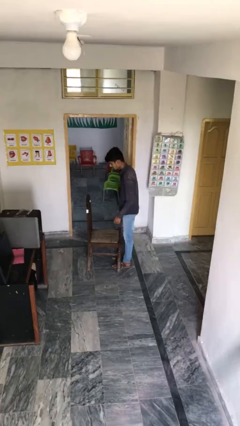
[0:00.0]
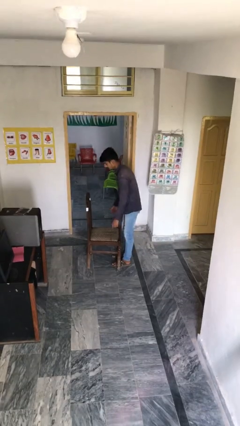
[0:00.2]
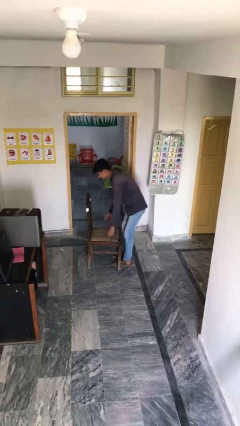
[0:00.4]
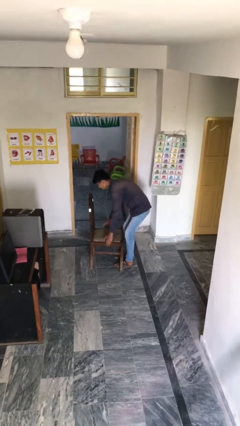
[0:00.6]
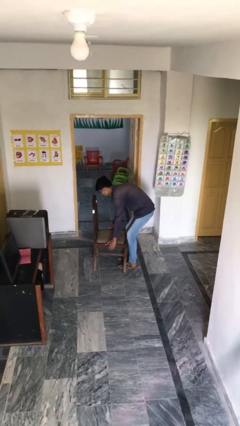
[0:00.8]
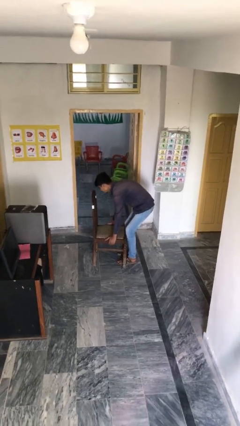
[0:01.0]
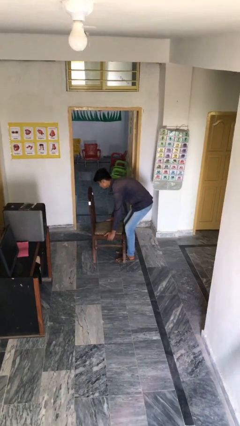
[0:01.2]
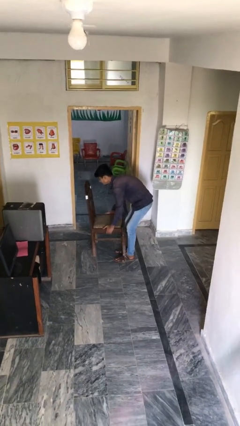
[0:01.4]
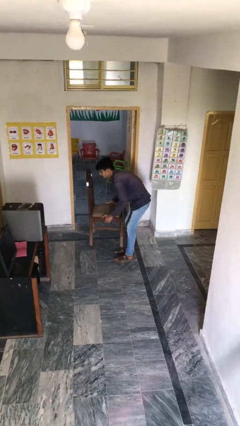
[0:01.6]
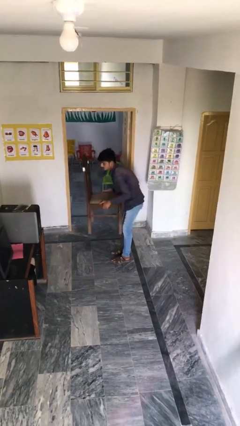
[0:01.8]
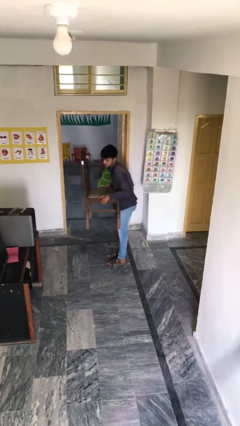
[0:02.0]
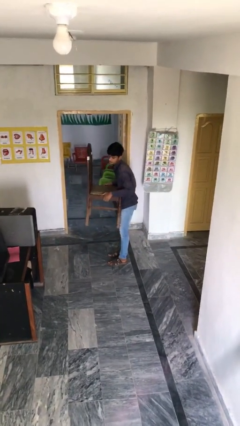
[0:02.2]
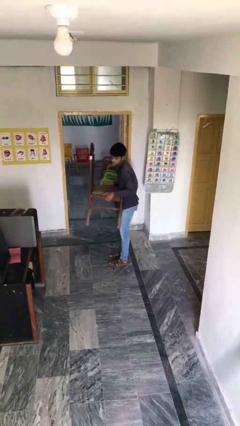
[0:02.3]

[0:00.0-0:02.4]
person picks up object from floor

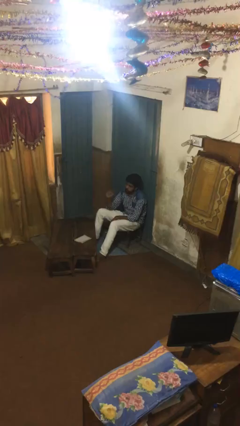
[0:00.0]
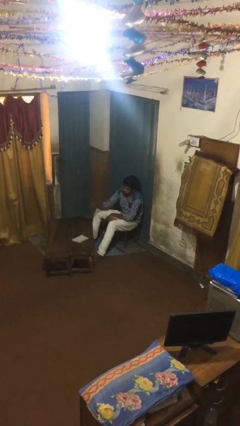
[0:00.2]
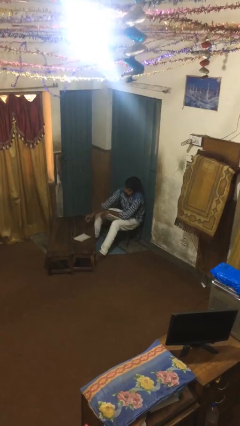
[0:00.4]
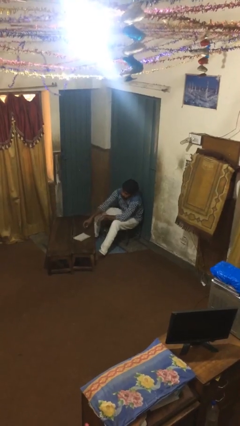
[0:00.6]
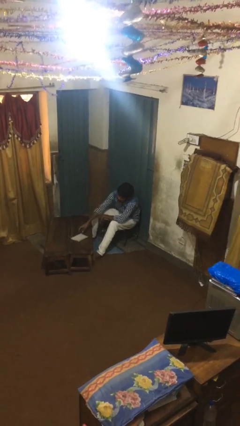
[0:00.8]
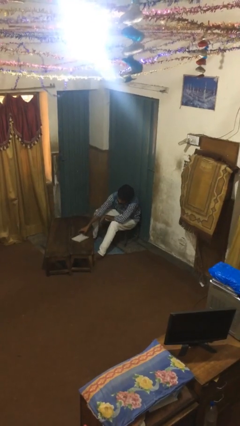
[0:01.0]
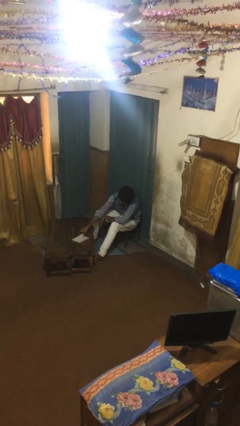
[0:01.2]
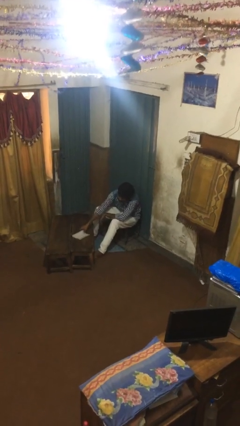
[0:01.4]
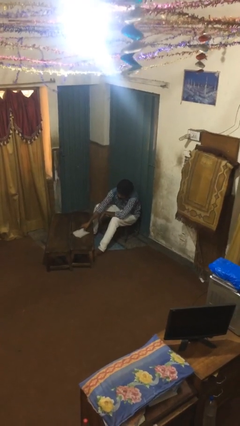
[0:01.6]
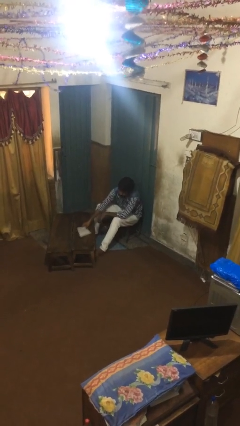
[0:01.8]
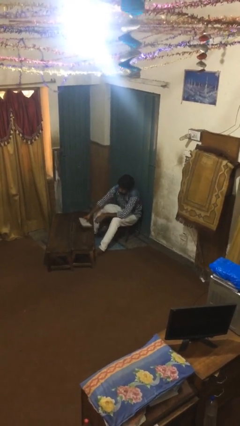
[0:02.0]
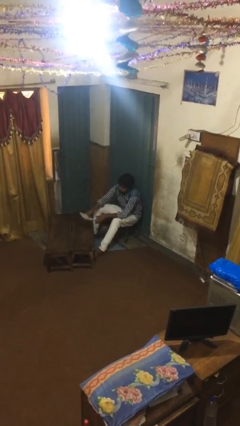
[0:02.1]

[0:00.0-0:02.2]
person picks up object from table

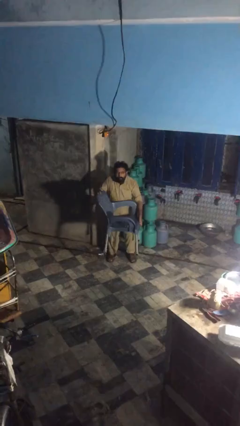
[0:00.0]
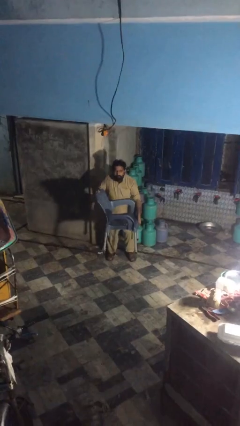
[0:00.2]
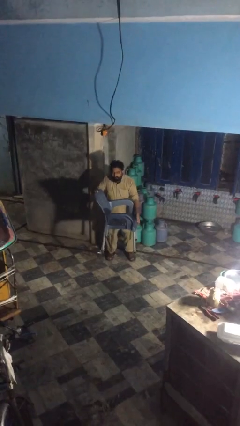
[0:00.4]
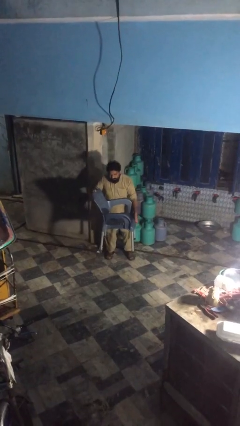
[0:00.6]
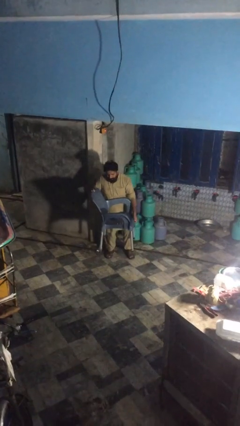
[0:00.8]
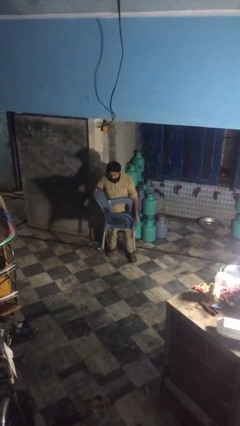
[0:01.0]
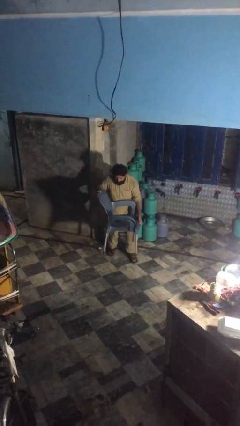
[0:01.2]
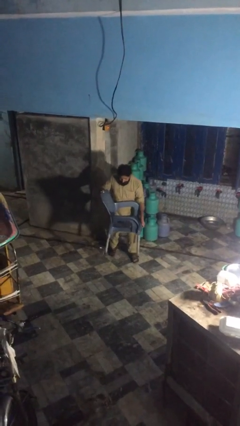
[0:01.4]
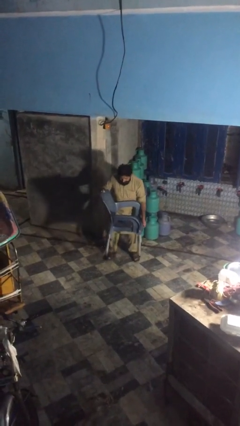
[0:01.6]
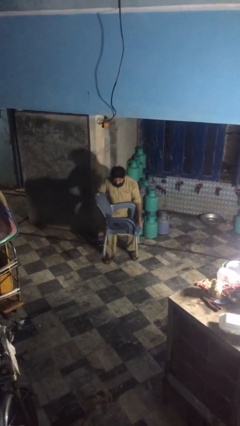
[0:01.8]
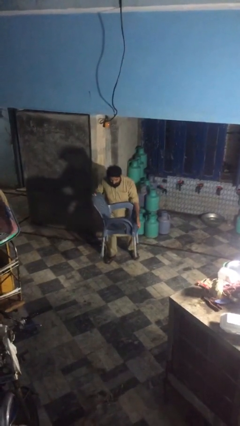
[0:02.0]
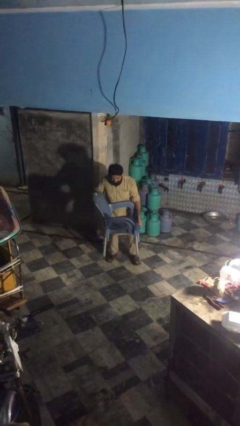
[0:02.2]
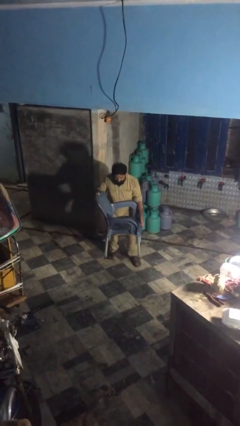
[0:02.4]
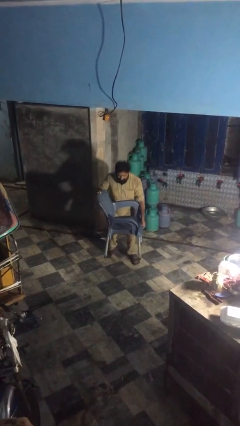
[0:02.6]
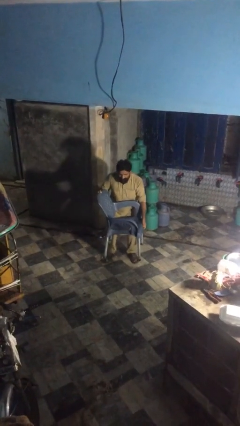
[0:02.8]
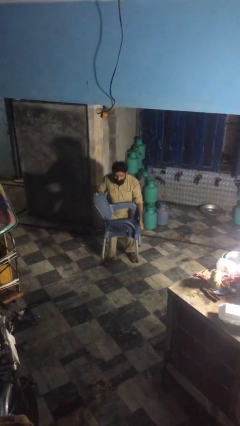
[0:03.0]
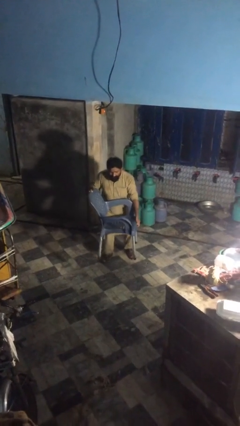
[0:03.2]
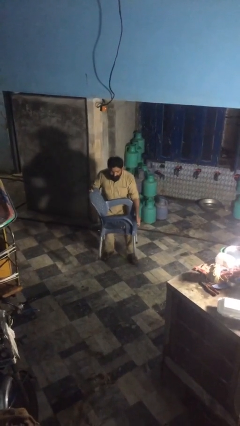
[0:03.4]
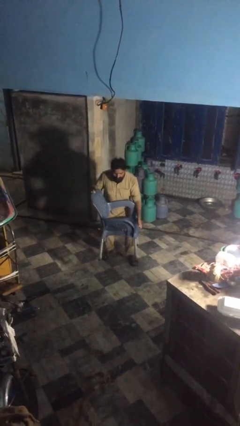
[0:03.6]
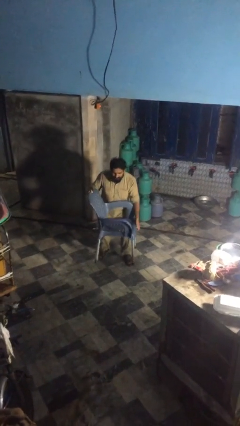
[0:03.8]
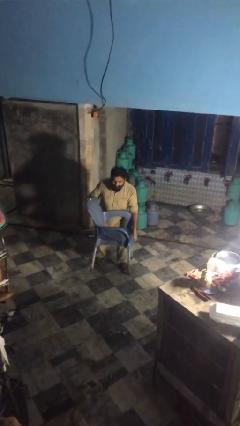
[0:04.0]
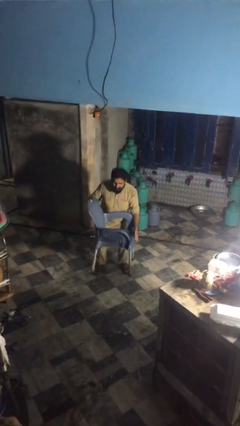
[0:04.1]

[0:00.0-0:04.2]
person carries heavy object

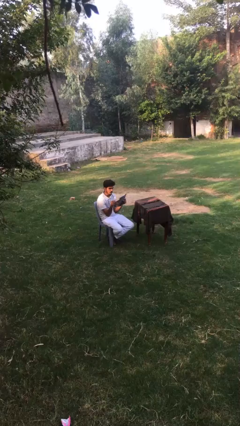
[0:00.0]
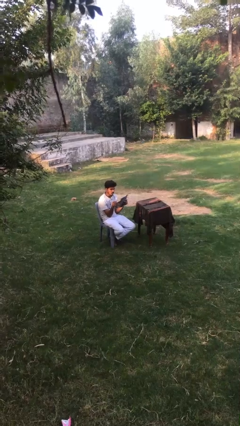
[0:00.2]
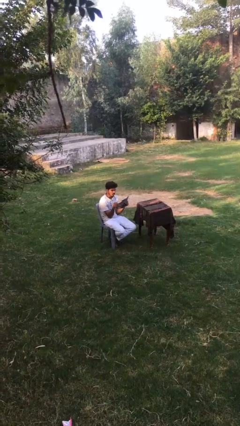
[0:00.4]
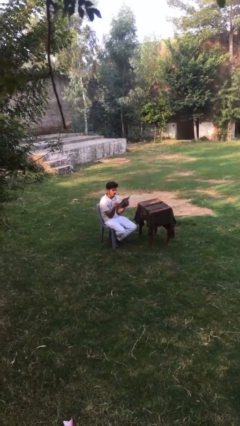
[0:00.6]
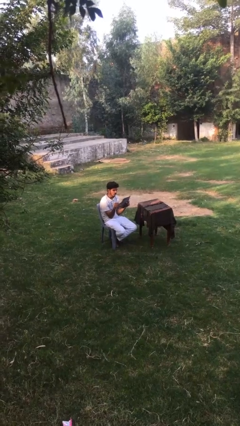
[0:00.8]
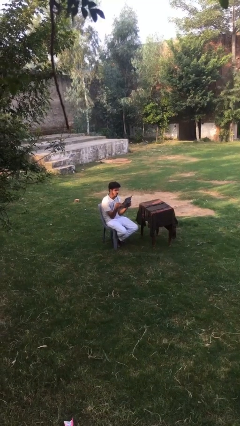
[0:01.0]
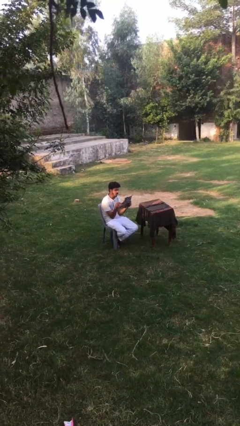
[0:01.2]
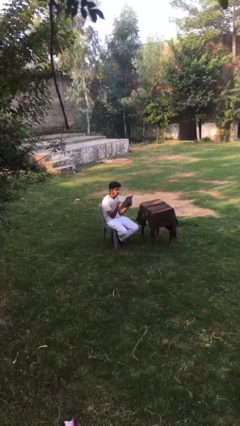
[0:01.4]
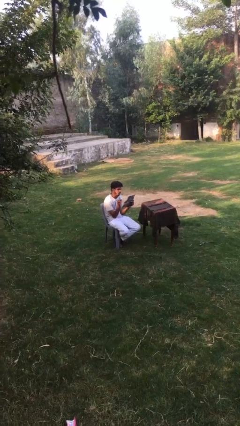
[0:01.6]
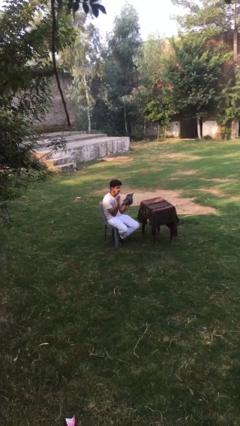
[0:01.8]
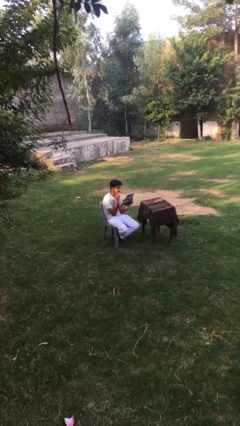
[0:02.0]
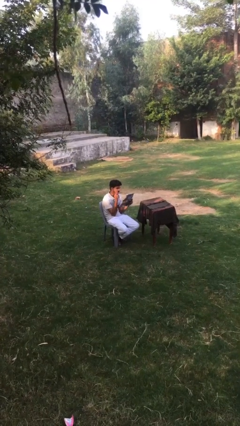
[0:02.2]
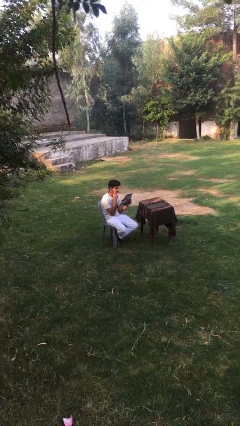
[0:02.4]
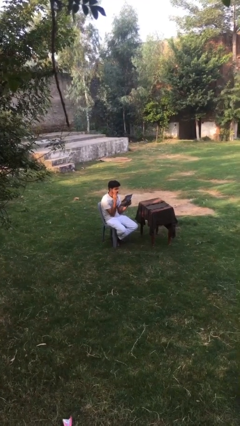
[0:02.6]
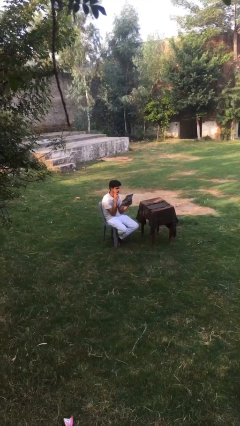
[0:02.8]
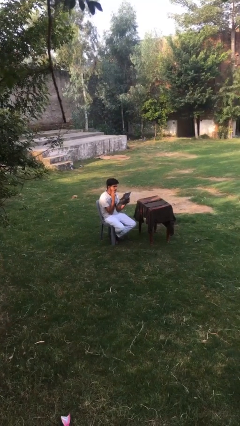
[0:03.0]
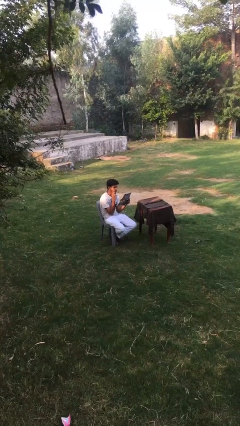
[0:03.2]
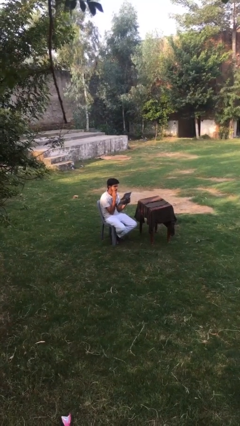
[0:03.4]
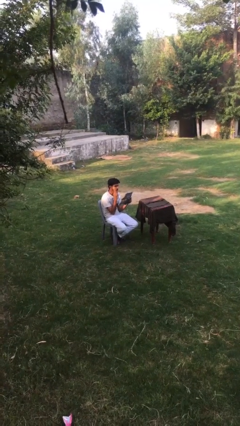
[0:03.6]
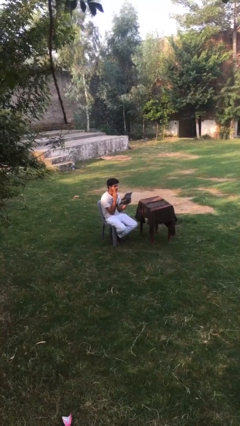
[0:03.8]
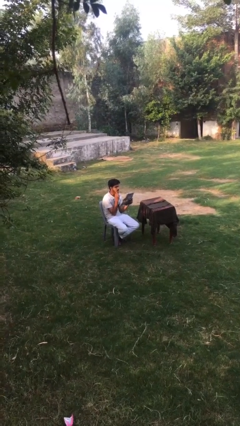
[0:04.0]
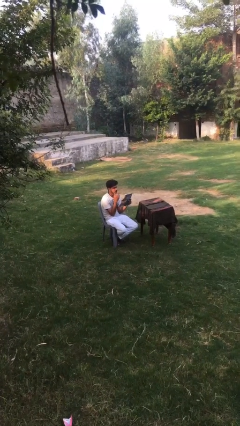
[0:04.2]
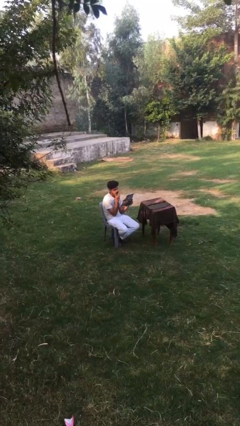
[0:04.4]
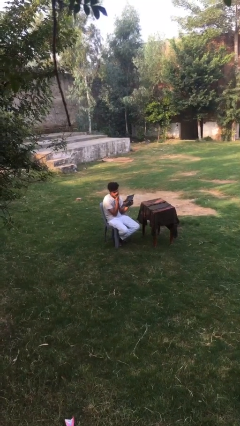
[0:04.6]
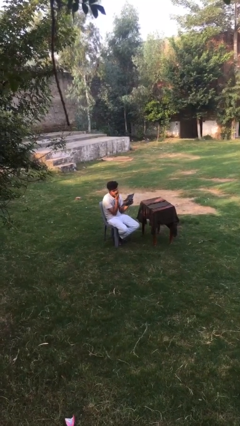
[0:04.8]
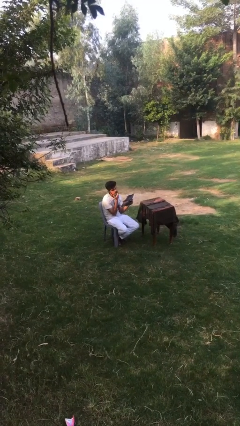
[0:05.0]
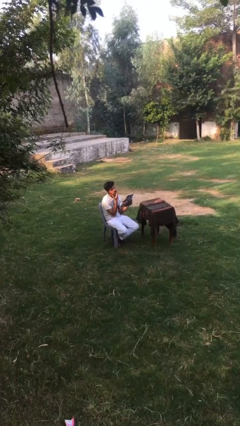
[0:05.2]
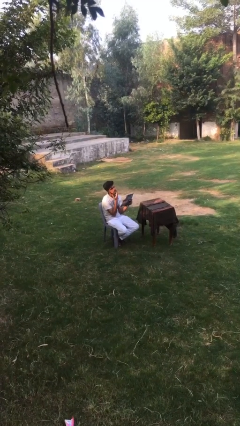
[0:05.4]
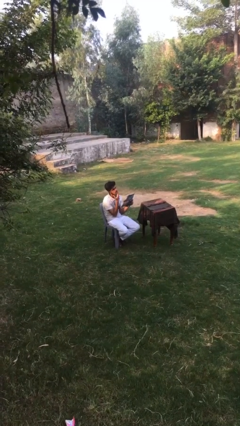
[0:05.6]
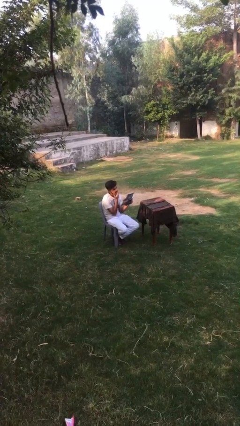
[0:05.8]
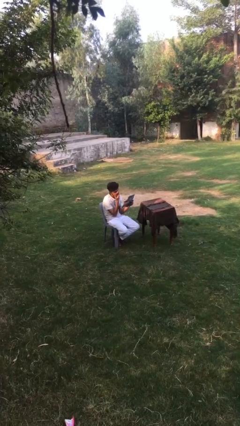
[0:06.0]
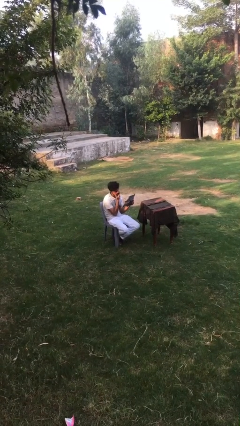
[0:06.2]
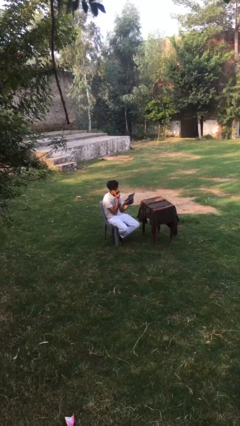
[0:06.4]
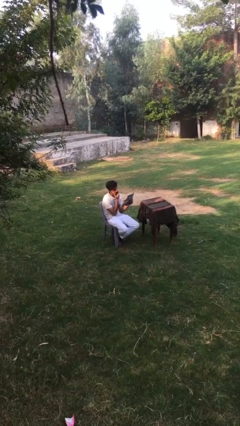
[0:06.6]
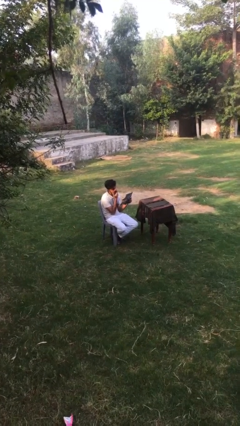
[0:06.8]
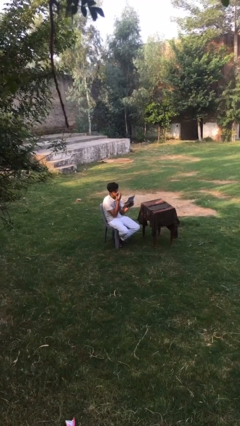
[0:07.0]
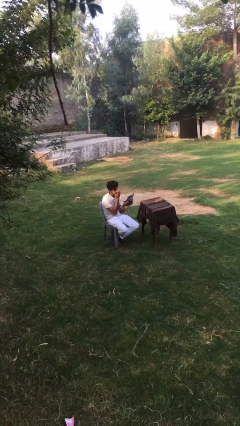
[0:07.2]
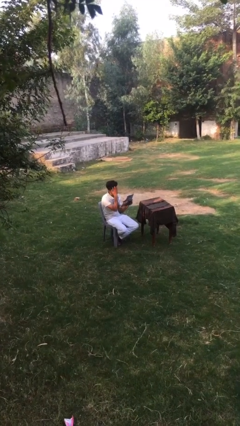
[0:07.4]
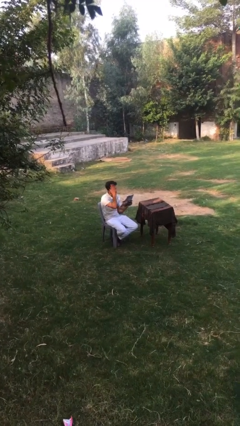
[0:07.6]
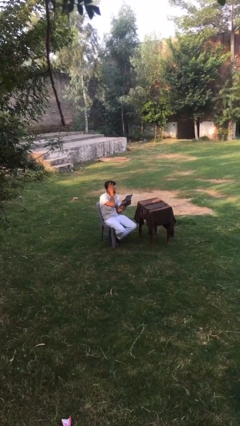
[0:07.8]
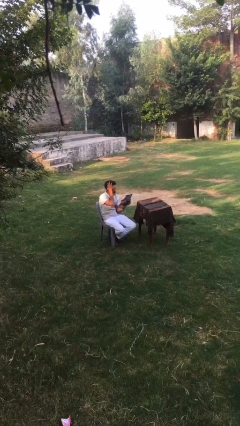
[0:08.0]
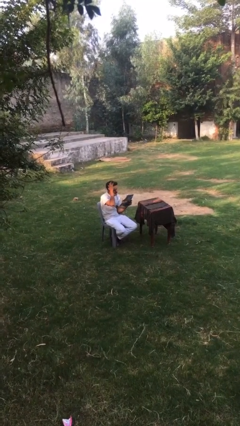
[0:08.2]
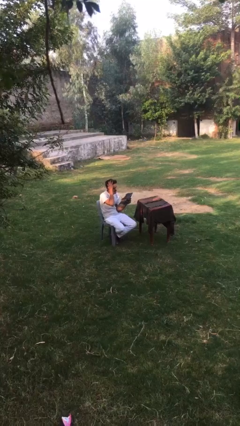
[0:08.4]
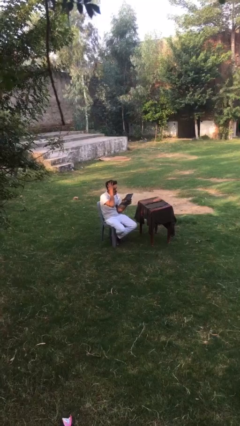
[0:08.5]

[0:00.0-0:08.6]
person reads document
